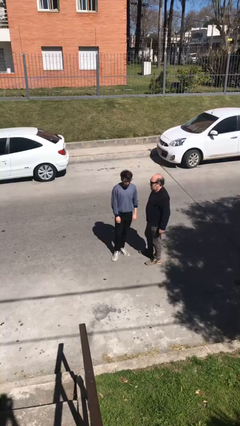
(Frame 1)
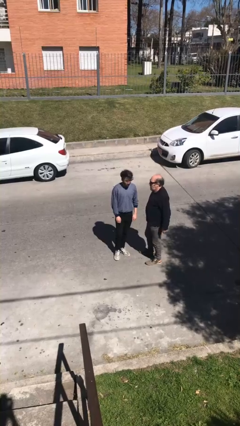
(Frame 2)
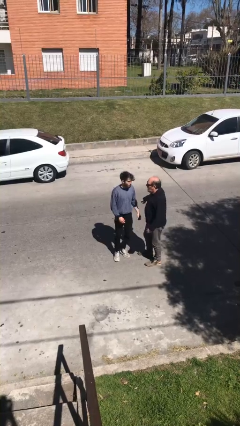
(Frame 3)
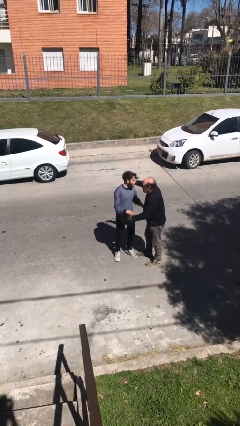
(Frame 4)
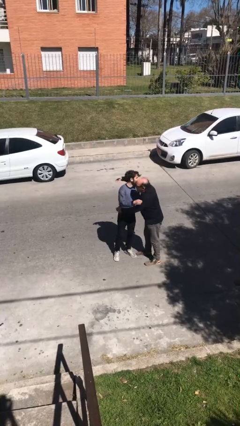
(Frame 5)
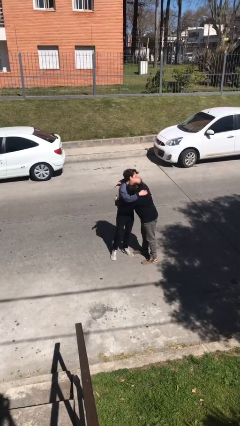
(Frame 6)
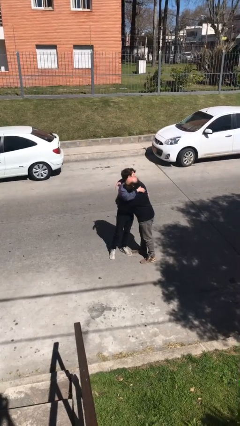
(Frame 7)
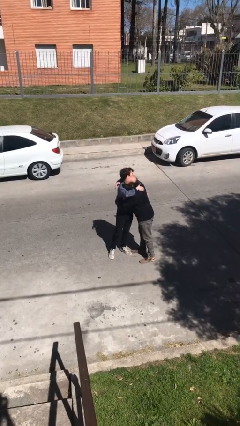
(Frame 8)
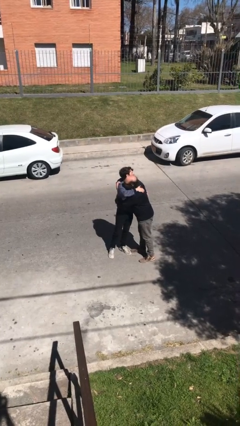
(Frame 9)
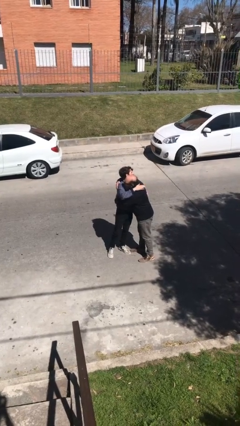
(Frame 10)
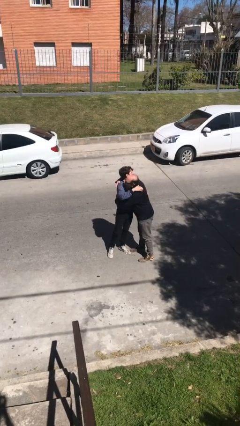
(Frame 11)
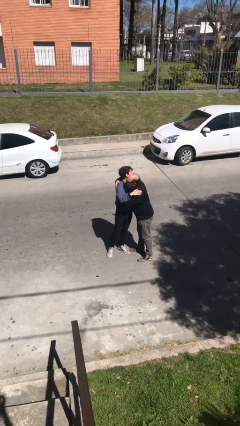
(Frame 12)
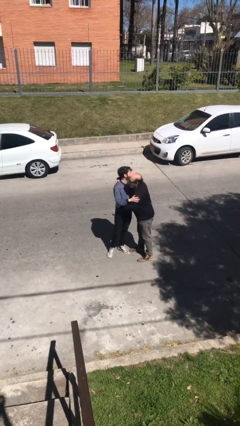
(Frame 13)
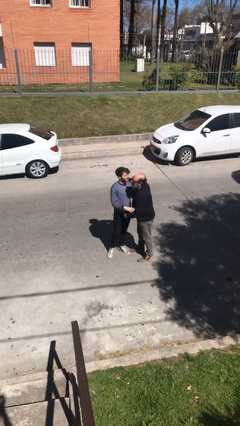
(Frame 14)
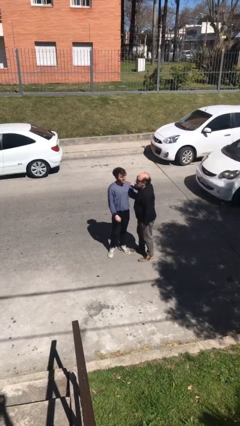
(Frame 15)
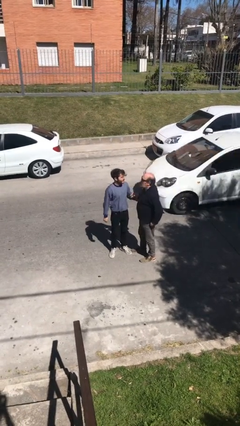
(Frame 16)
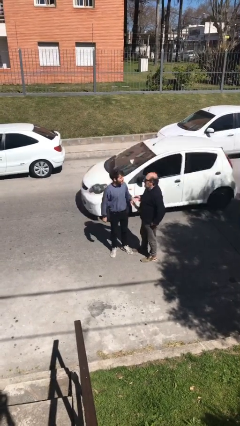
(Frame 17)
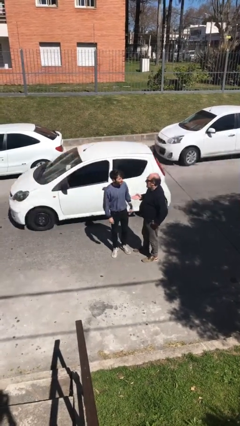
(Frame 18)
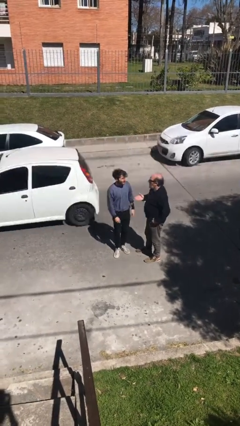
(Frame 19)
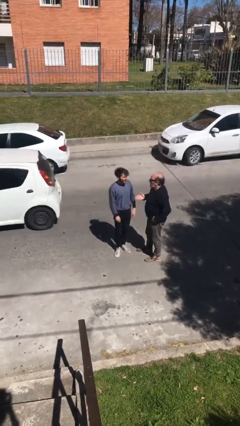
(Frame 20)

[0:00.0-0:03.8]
person embraces person

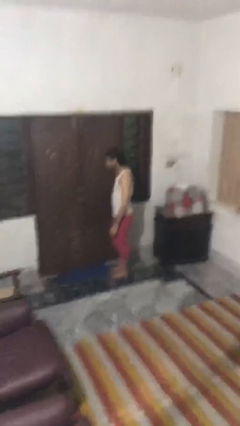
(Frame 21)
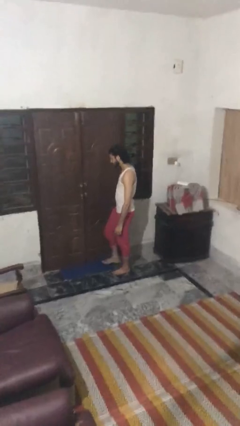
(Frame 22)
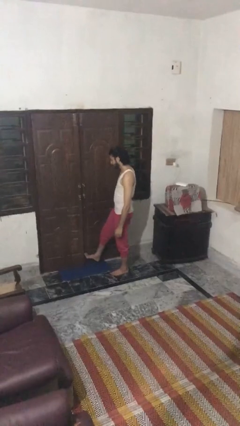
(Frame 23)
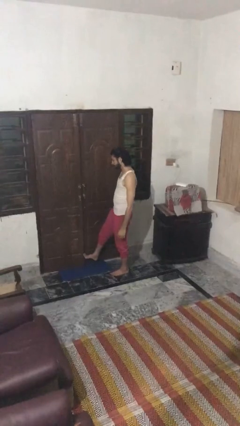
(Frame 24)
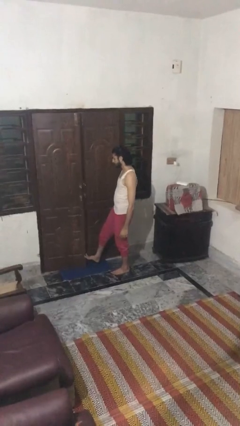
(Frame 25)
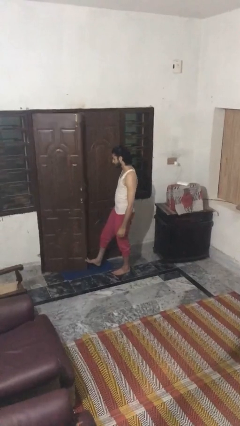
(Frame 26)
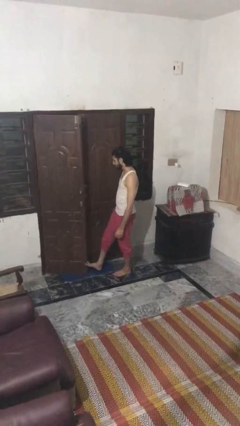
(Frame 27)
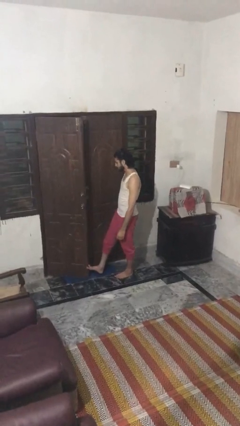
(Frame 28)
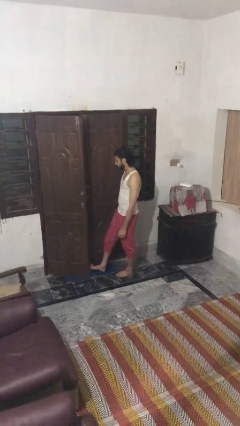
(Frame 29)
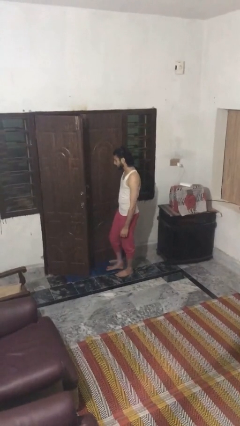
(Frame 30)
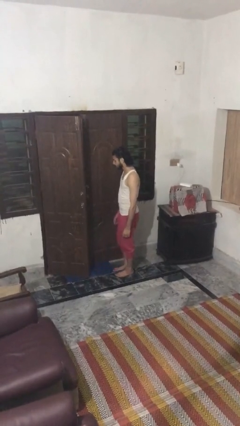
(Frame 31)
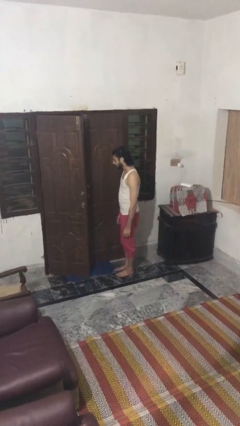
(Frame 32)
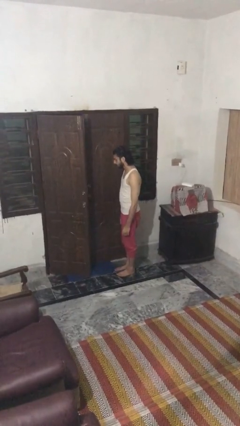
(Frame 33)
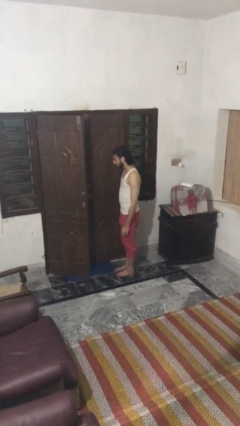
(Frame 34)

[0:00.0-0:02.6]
person opens facility door

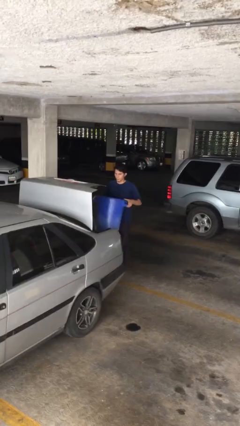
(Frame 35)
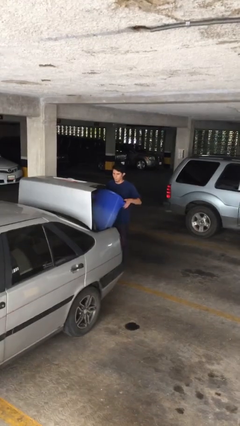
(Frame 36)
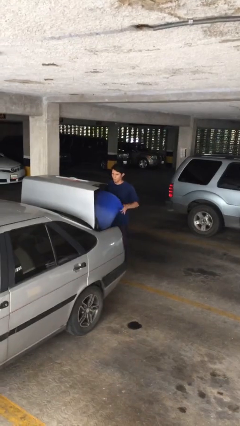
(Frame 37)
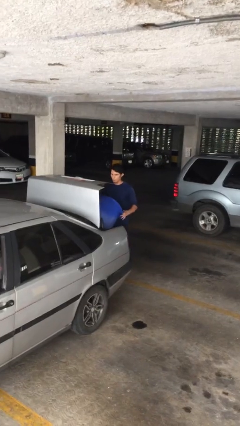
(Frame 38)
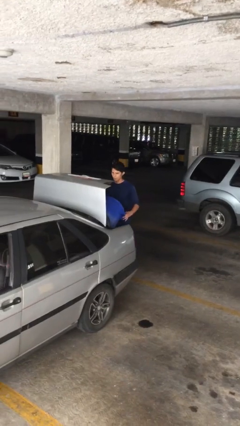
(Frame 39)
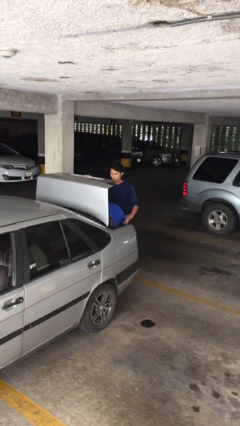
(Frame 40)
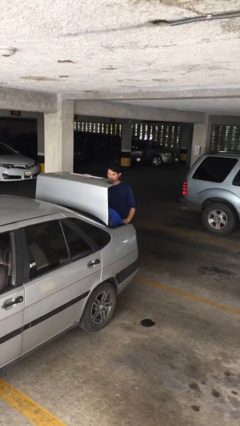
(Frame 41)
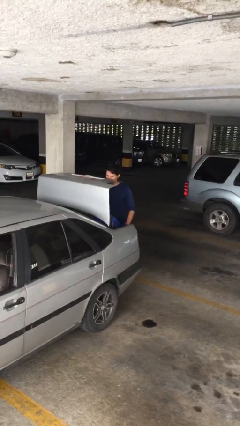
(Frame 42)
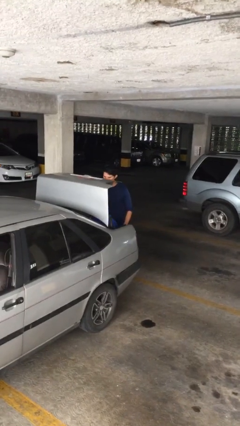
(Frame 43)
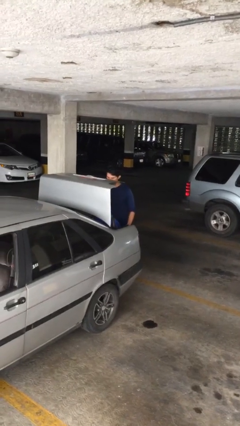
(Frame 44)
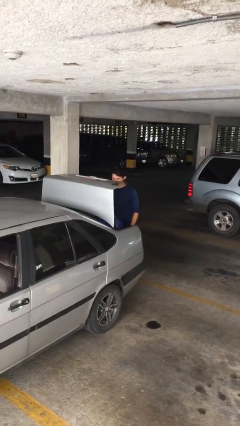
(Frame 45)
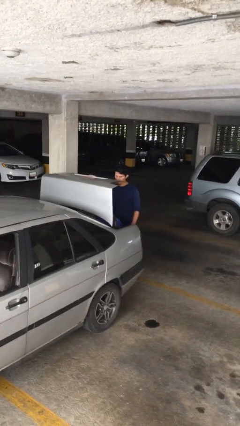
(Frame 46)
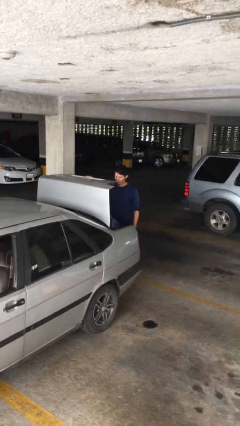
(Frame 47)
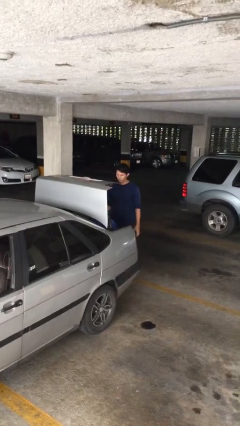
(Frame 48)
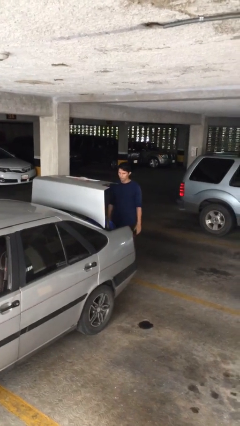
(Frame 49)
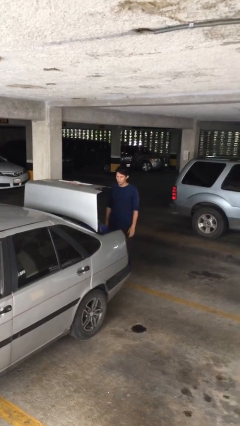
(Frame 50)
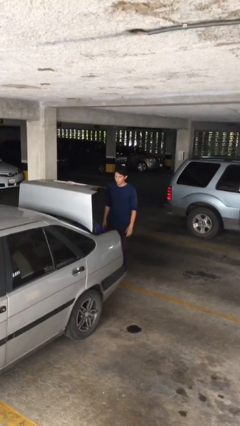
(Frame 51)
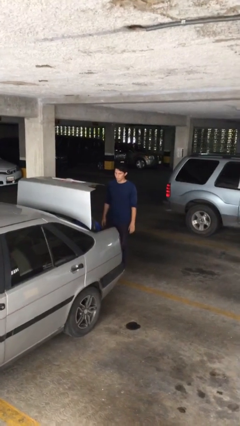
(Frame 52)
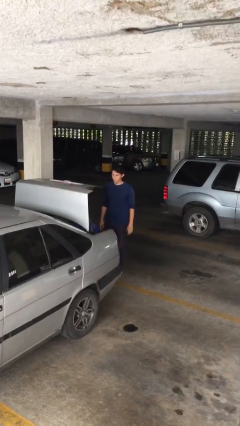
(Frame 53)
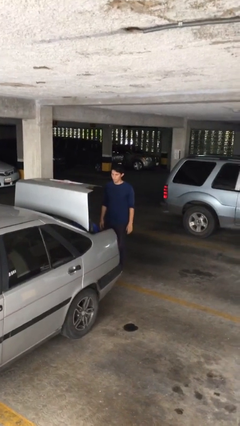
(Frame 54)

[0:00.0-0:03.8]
person loads car

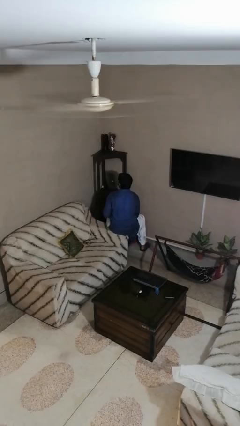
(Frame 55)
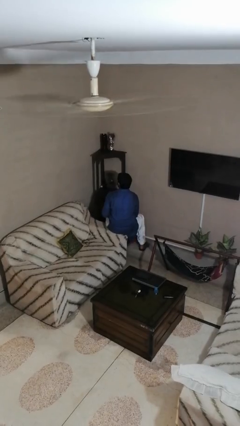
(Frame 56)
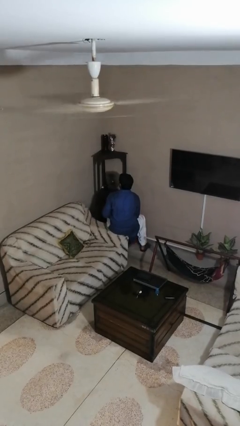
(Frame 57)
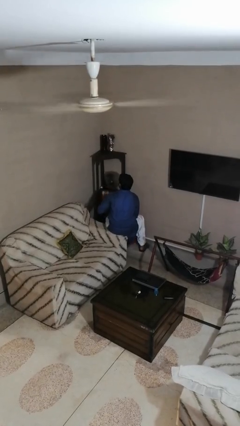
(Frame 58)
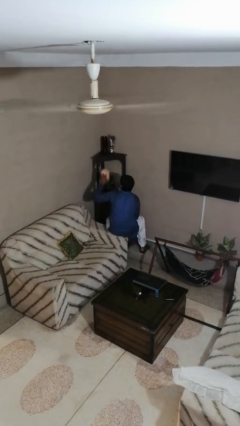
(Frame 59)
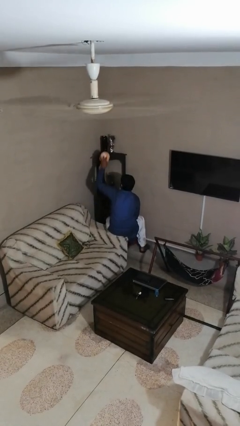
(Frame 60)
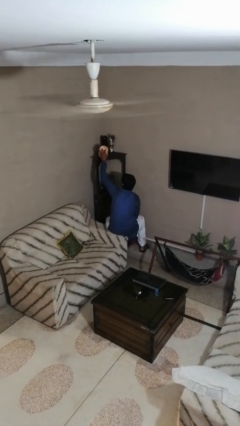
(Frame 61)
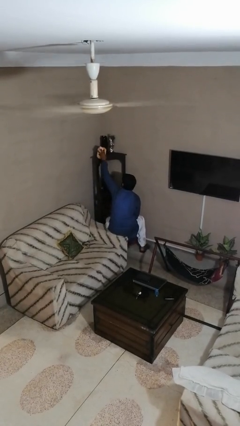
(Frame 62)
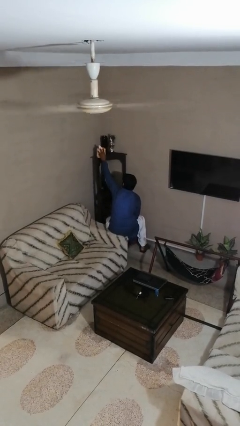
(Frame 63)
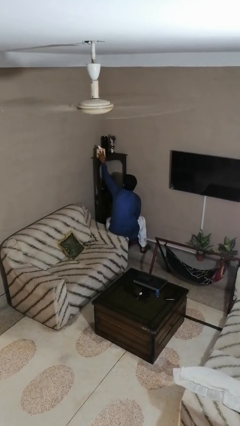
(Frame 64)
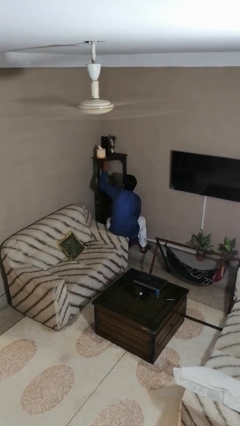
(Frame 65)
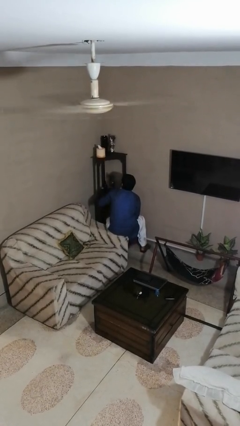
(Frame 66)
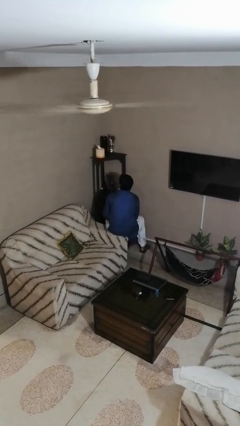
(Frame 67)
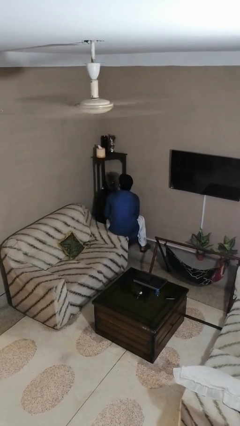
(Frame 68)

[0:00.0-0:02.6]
person puts down object on shelf

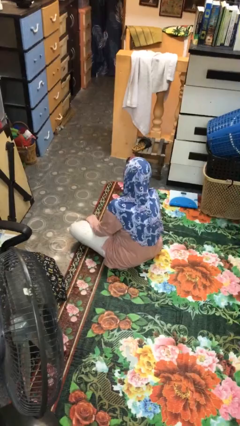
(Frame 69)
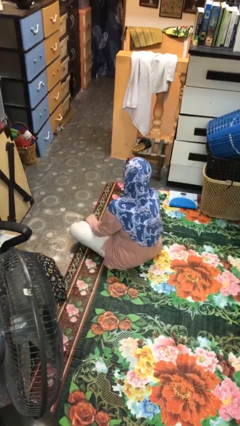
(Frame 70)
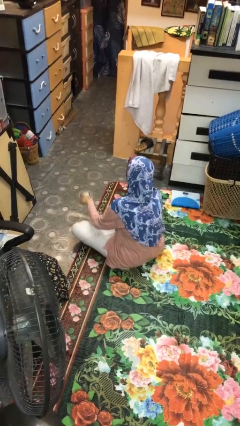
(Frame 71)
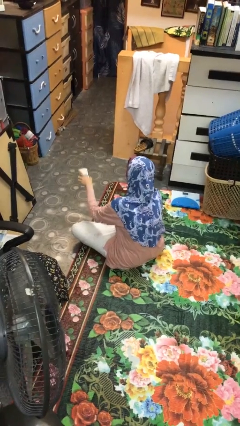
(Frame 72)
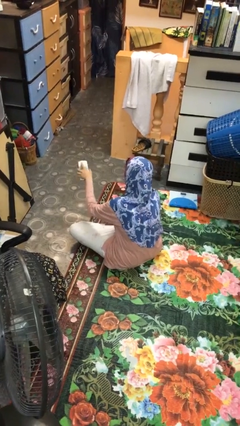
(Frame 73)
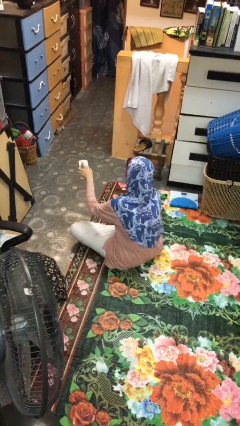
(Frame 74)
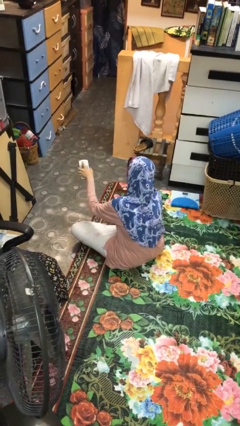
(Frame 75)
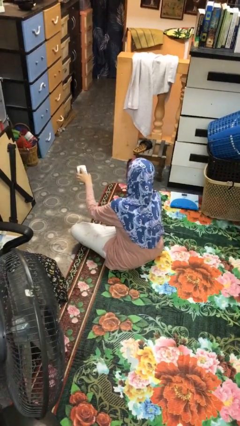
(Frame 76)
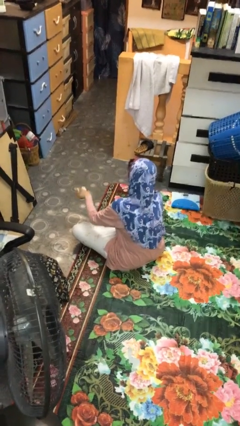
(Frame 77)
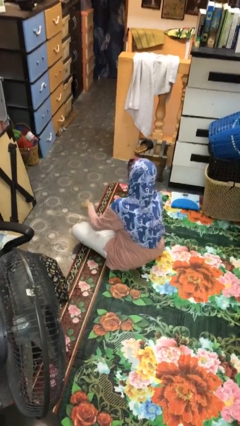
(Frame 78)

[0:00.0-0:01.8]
person uses television remote

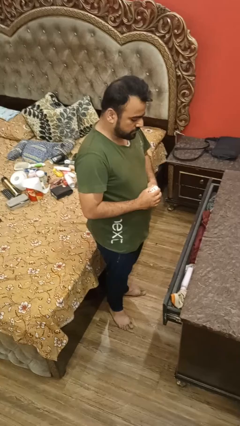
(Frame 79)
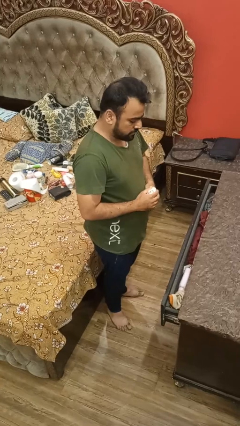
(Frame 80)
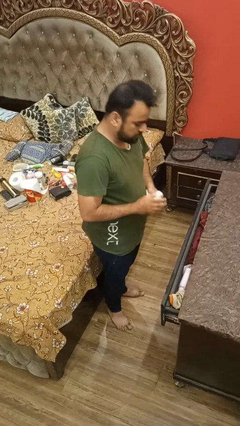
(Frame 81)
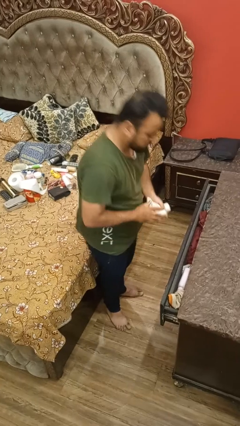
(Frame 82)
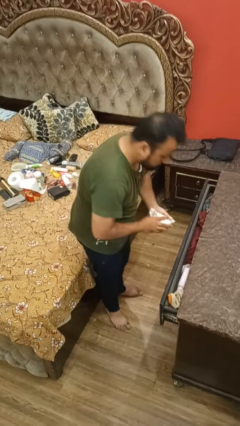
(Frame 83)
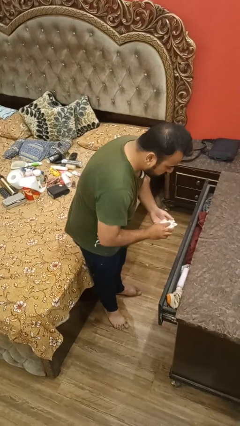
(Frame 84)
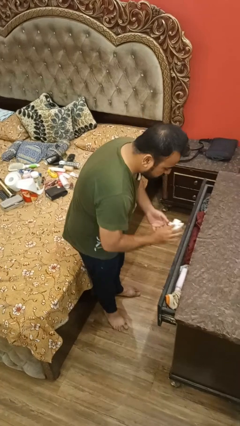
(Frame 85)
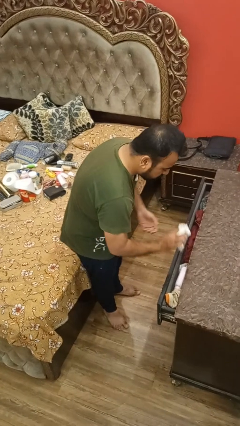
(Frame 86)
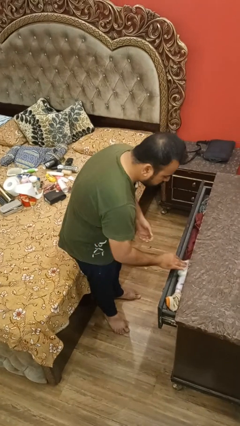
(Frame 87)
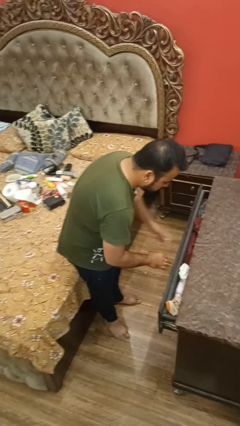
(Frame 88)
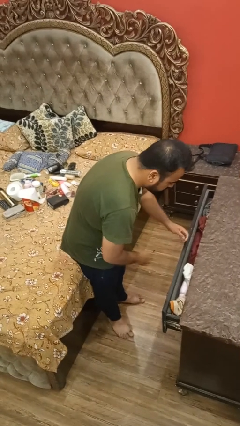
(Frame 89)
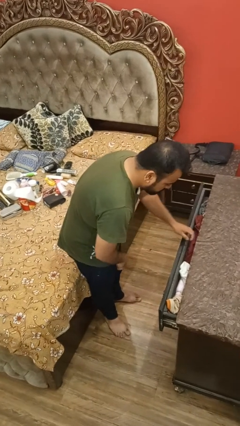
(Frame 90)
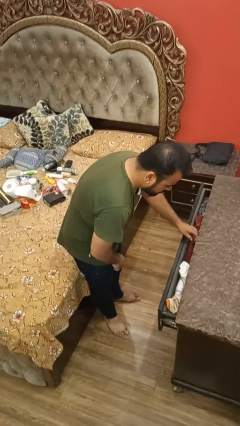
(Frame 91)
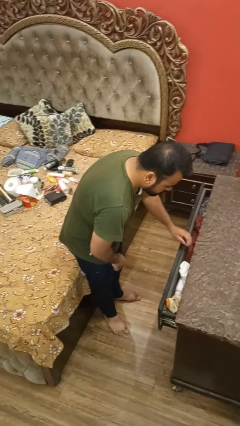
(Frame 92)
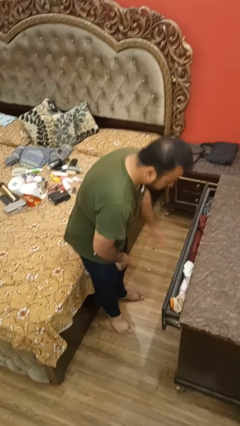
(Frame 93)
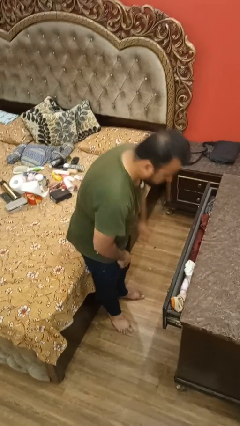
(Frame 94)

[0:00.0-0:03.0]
person puts clothes into dresser
